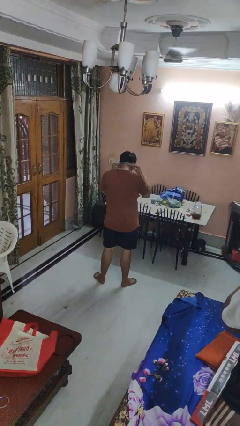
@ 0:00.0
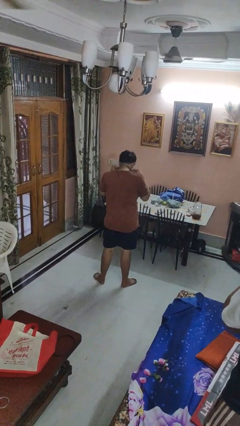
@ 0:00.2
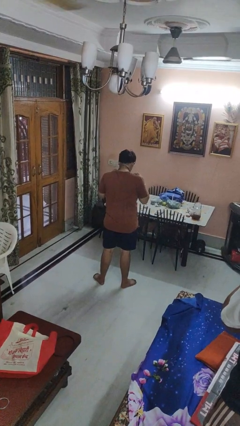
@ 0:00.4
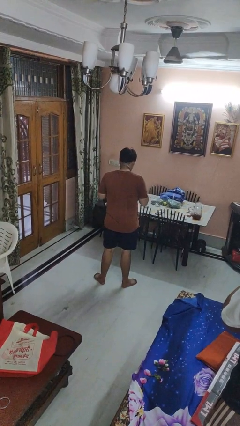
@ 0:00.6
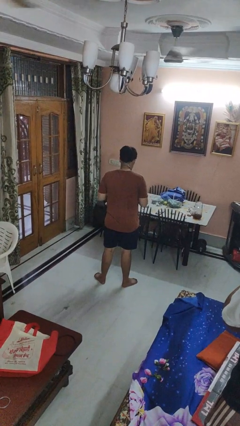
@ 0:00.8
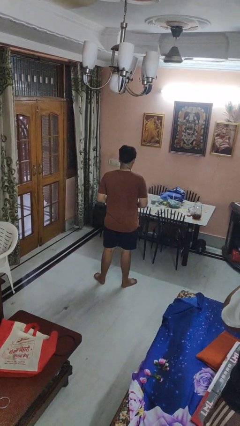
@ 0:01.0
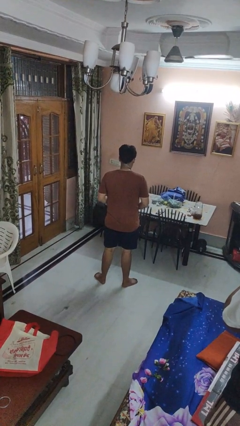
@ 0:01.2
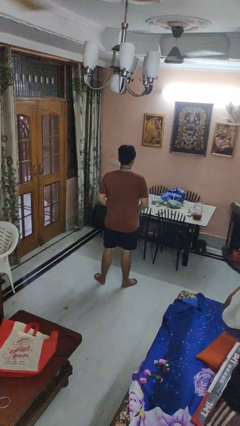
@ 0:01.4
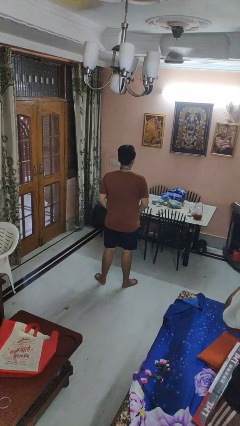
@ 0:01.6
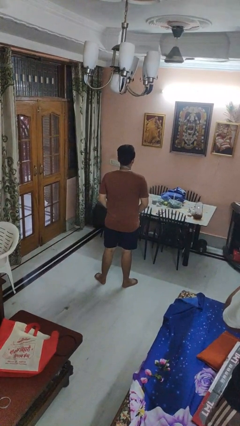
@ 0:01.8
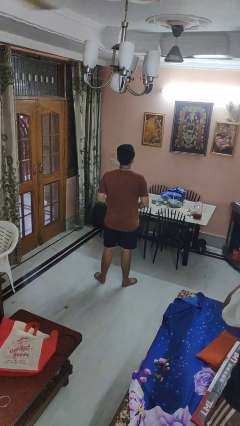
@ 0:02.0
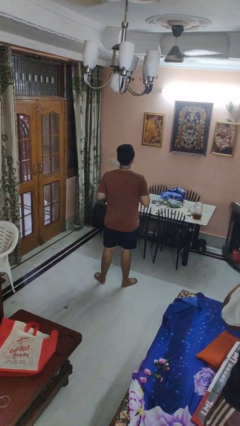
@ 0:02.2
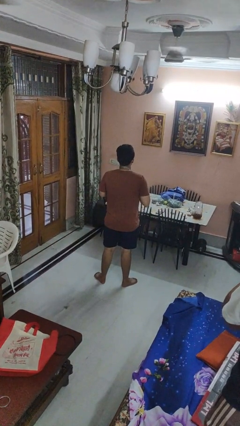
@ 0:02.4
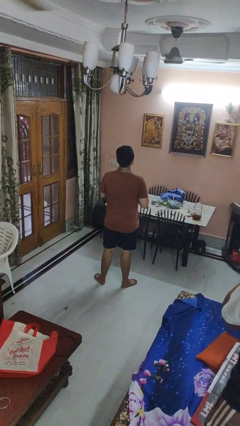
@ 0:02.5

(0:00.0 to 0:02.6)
person puts on necktie

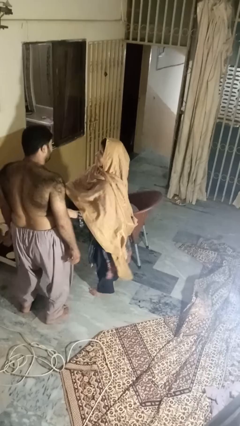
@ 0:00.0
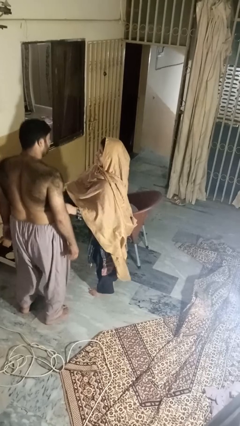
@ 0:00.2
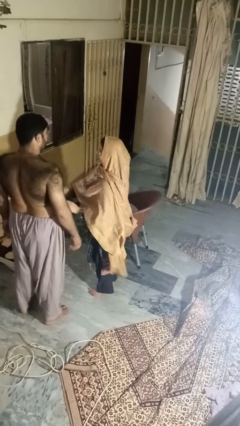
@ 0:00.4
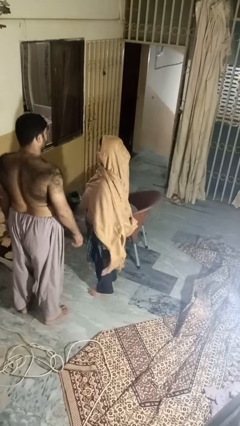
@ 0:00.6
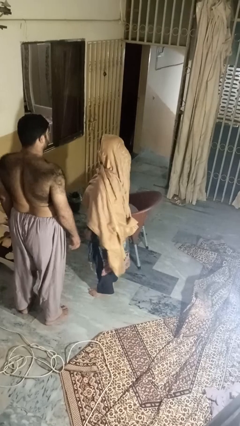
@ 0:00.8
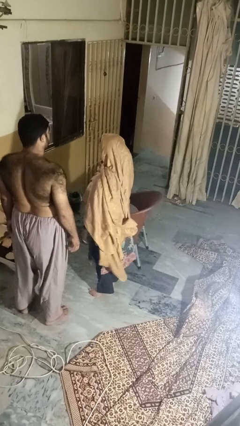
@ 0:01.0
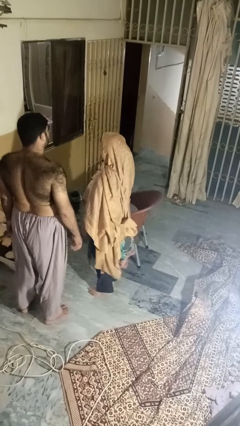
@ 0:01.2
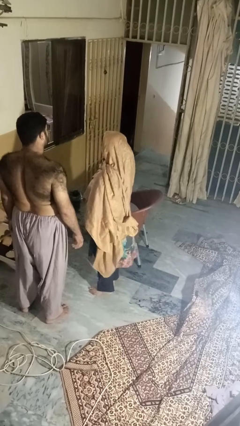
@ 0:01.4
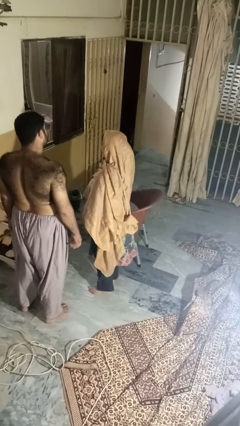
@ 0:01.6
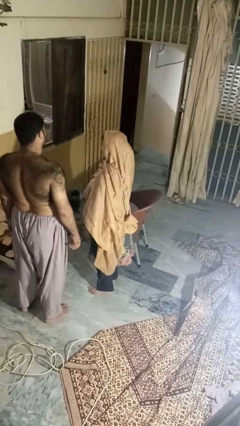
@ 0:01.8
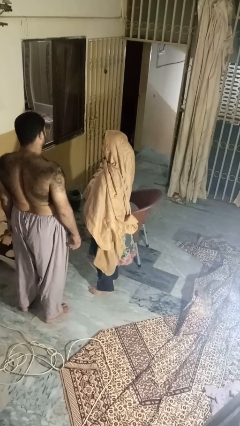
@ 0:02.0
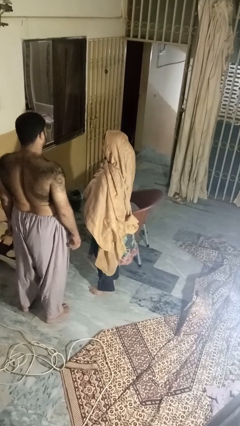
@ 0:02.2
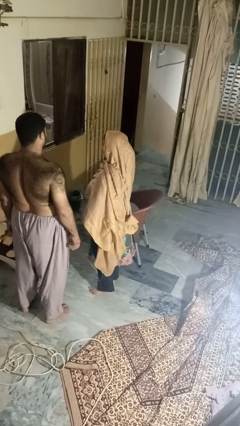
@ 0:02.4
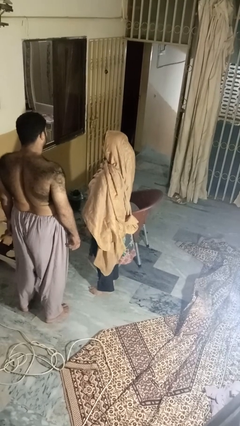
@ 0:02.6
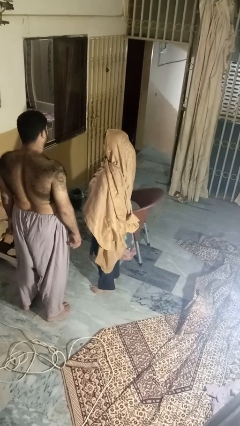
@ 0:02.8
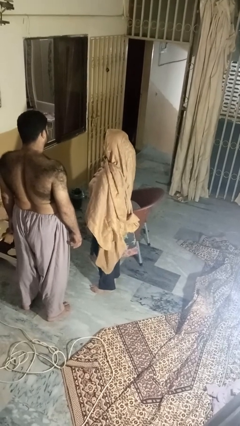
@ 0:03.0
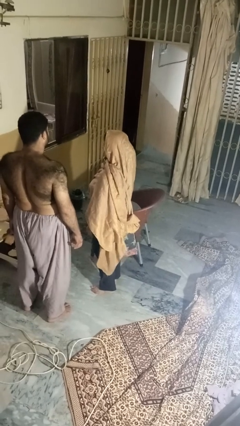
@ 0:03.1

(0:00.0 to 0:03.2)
person tickles person

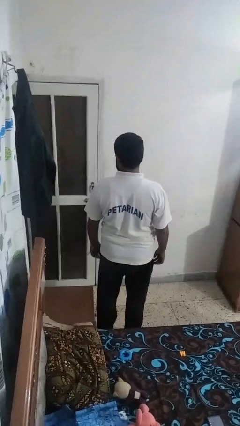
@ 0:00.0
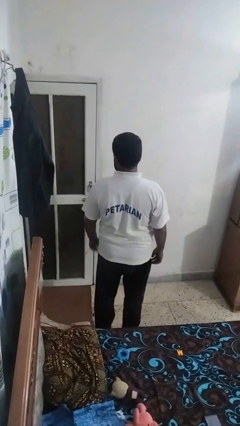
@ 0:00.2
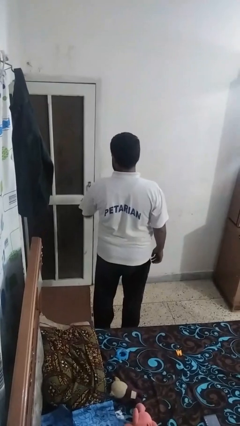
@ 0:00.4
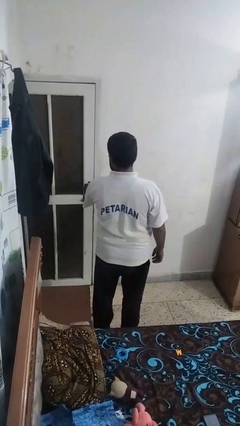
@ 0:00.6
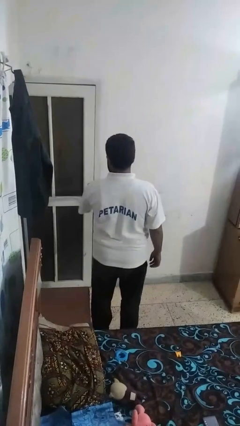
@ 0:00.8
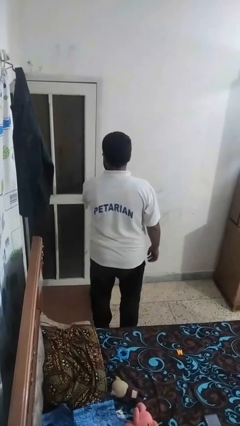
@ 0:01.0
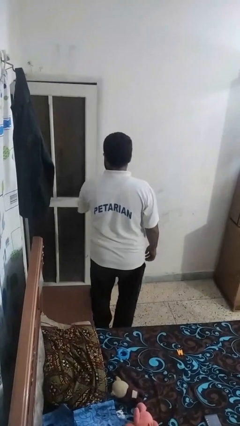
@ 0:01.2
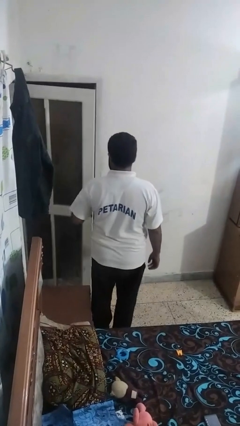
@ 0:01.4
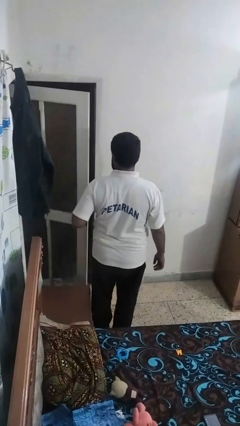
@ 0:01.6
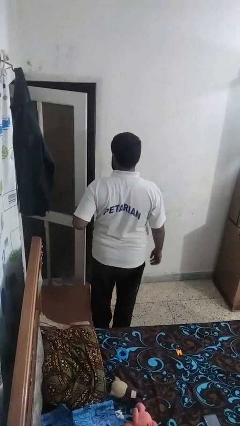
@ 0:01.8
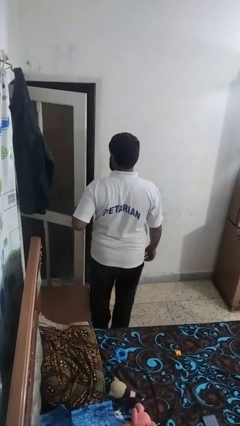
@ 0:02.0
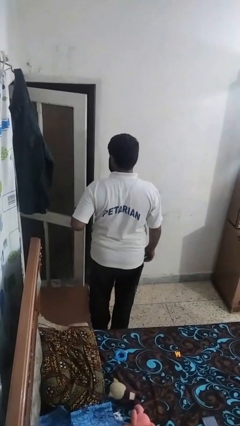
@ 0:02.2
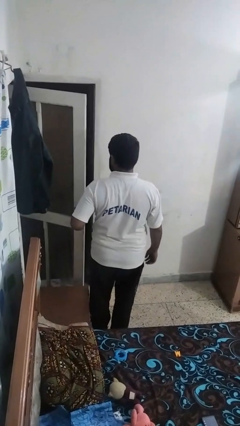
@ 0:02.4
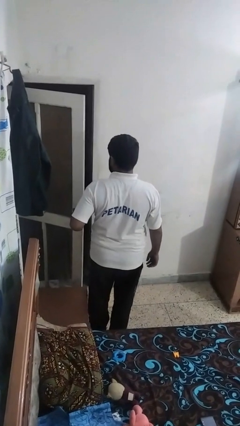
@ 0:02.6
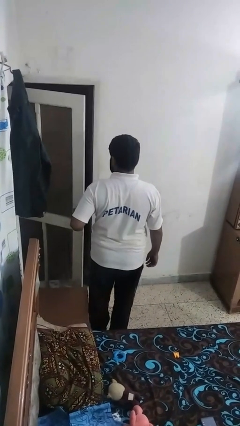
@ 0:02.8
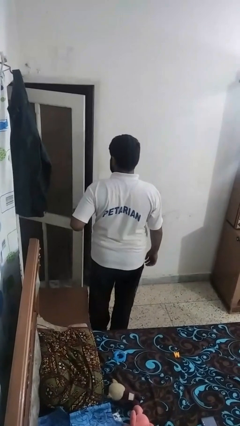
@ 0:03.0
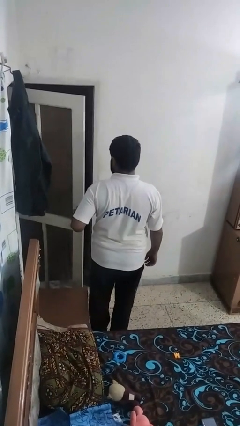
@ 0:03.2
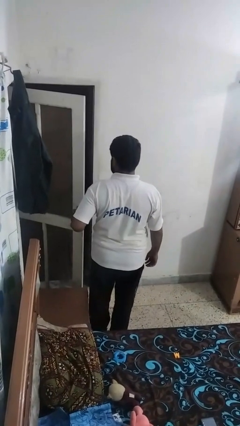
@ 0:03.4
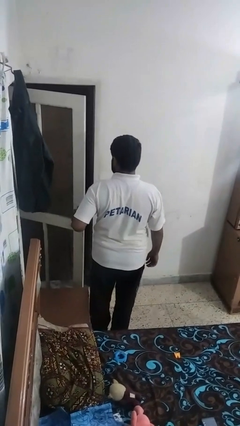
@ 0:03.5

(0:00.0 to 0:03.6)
person opens facility door

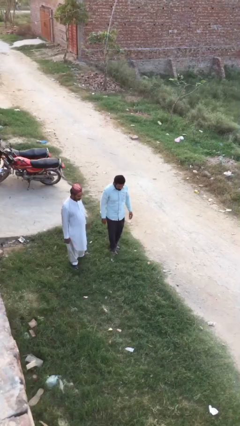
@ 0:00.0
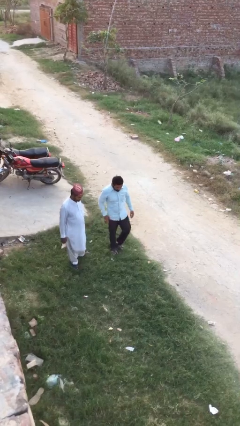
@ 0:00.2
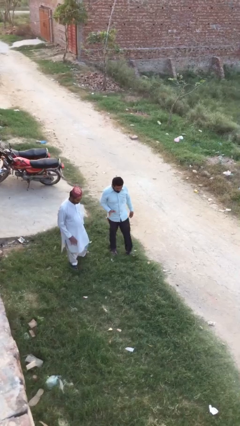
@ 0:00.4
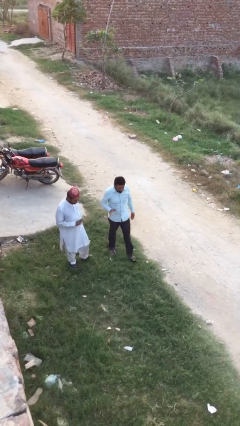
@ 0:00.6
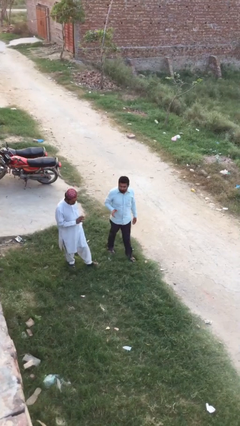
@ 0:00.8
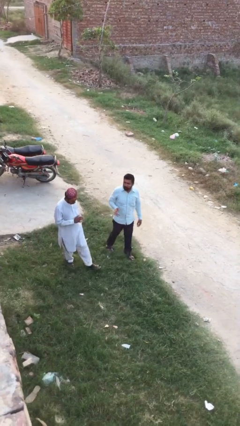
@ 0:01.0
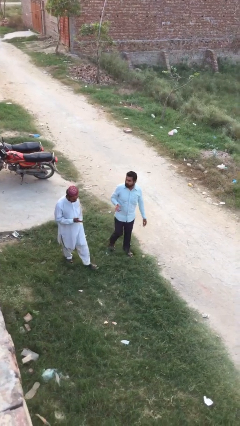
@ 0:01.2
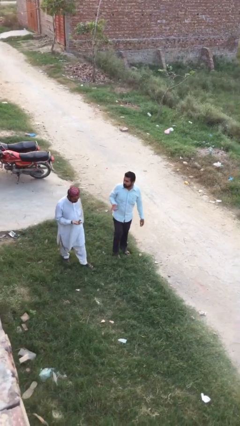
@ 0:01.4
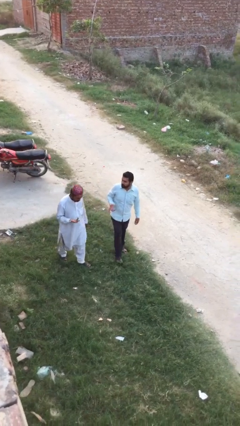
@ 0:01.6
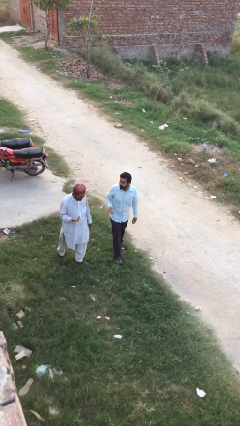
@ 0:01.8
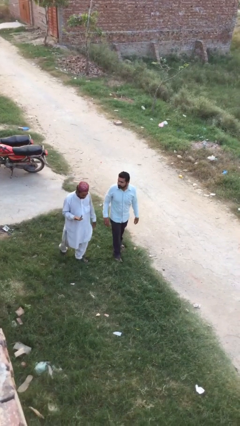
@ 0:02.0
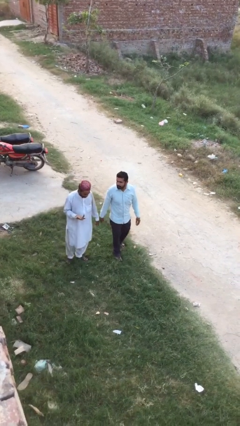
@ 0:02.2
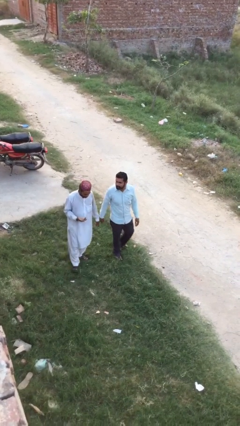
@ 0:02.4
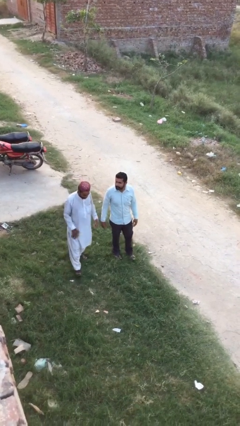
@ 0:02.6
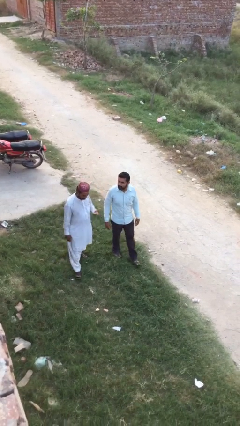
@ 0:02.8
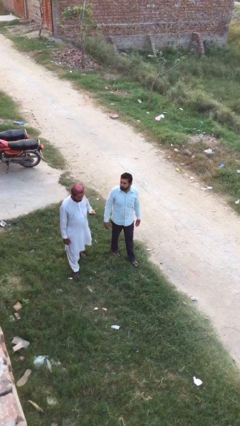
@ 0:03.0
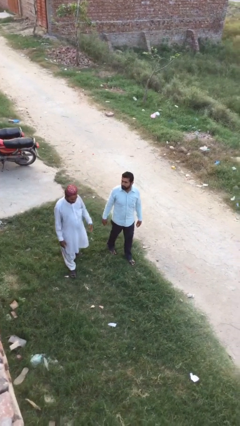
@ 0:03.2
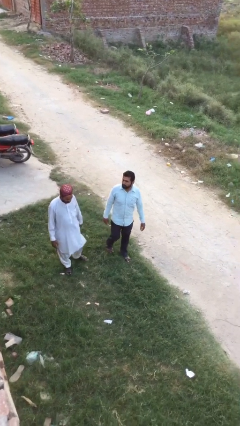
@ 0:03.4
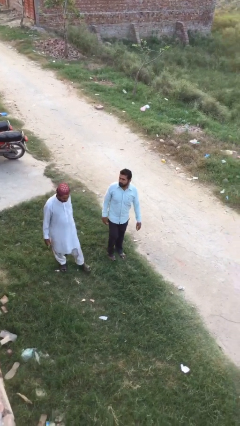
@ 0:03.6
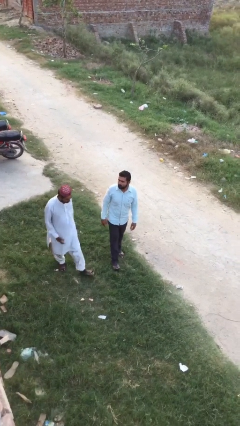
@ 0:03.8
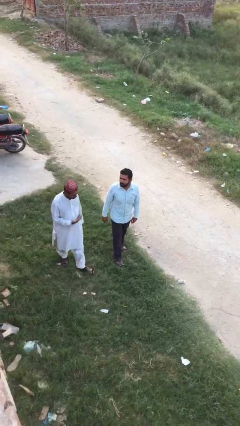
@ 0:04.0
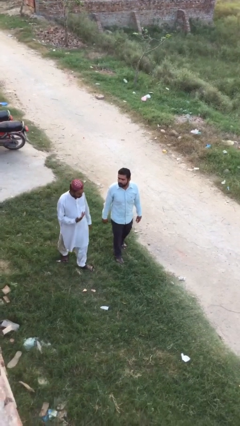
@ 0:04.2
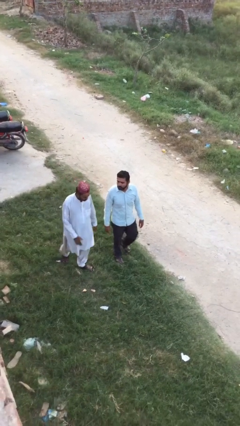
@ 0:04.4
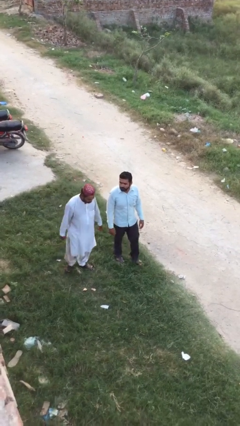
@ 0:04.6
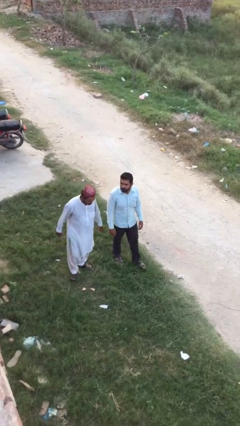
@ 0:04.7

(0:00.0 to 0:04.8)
person talks to person

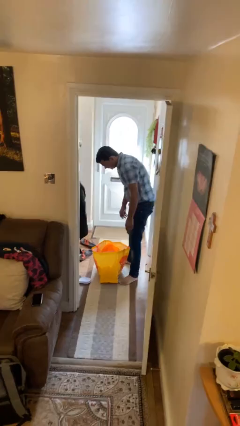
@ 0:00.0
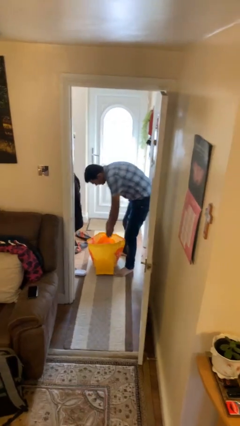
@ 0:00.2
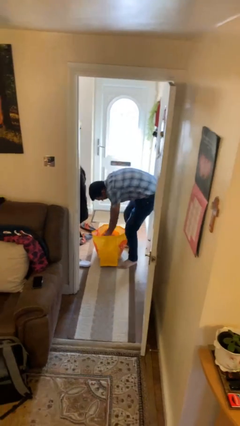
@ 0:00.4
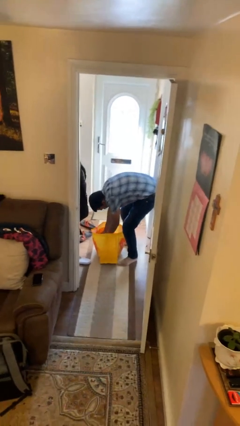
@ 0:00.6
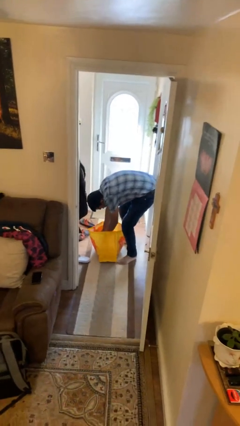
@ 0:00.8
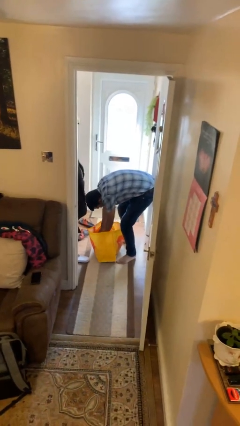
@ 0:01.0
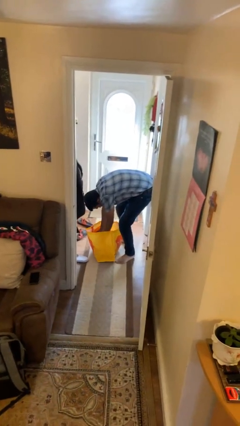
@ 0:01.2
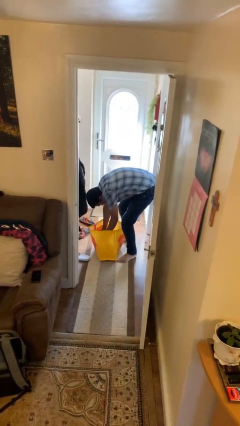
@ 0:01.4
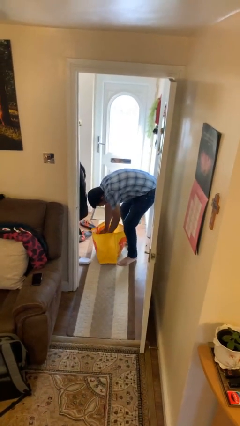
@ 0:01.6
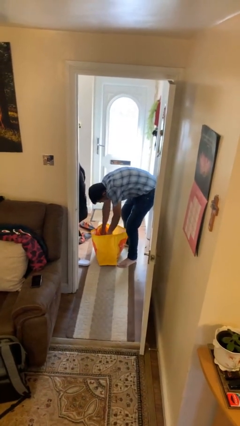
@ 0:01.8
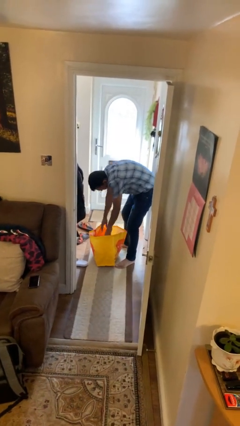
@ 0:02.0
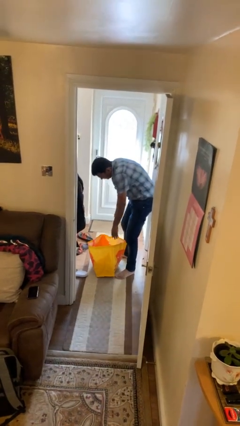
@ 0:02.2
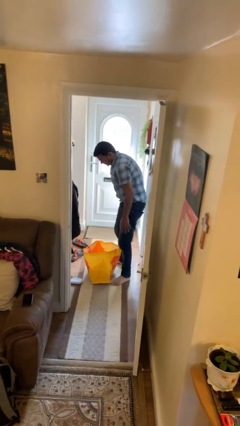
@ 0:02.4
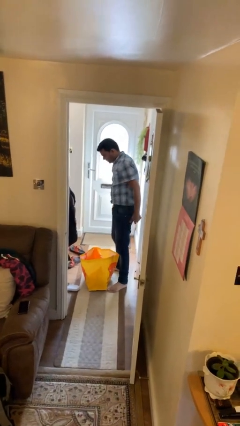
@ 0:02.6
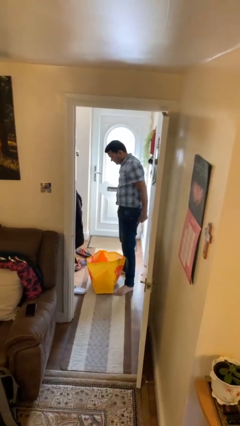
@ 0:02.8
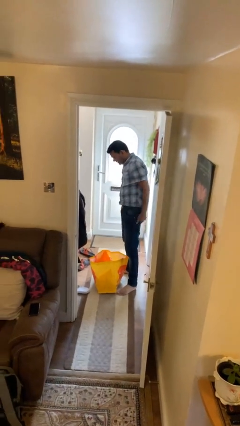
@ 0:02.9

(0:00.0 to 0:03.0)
person searches in bag

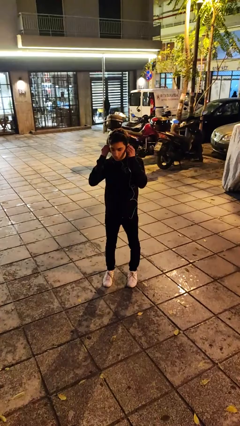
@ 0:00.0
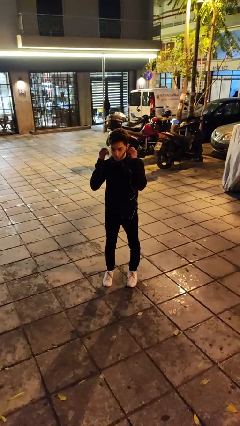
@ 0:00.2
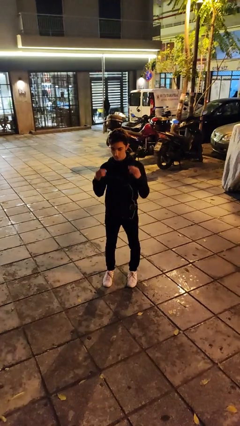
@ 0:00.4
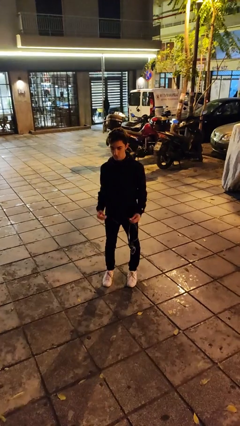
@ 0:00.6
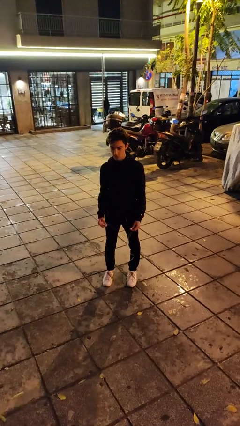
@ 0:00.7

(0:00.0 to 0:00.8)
person takes off headphones
